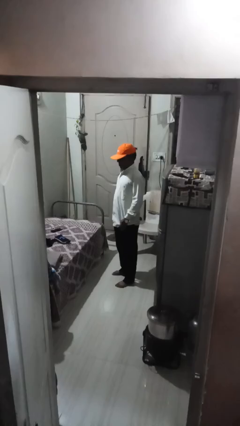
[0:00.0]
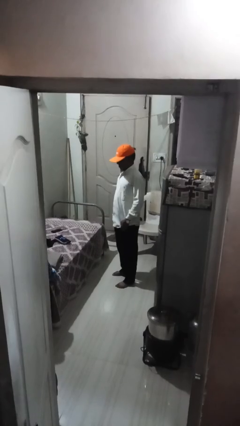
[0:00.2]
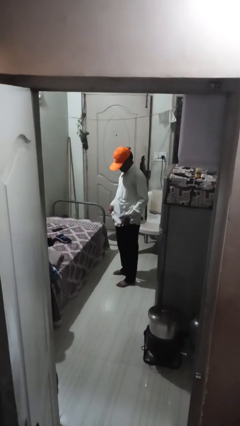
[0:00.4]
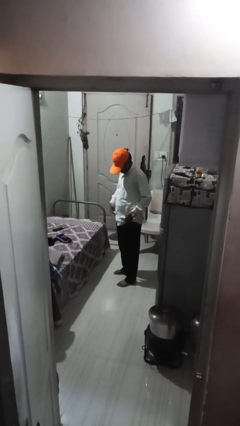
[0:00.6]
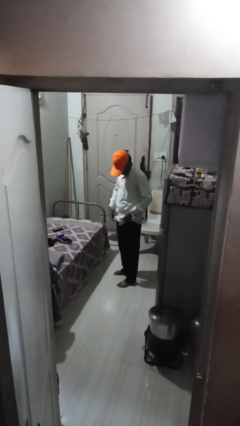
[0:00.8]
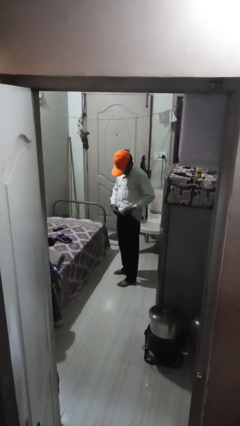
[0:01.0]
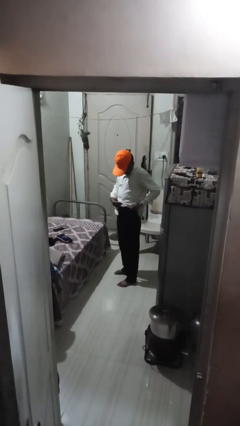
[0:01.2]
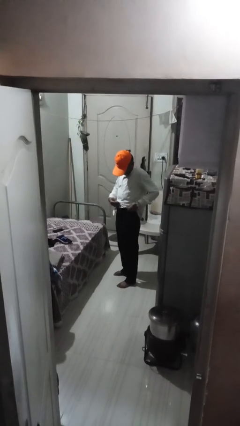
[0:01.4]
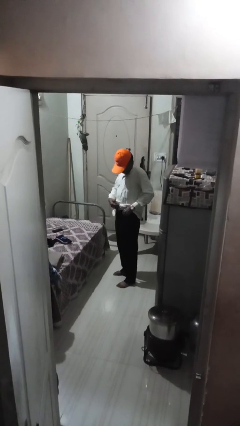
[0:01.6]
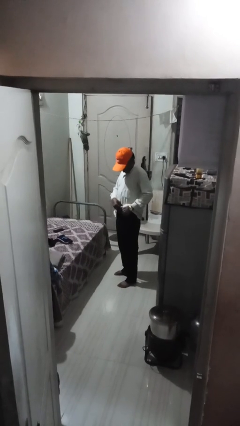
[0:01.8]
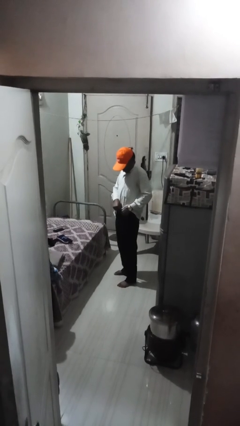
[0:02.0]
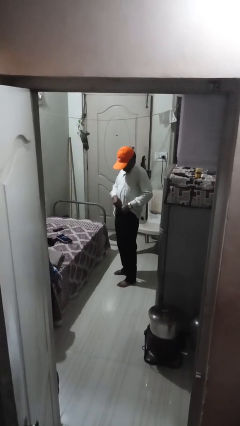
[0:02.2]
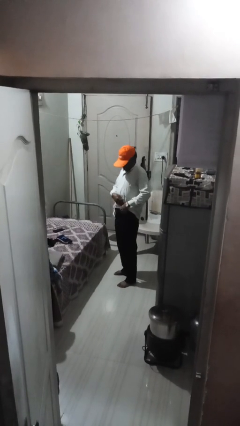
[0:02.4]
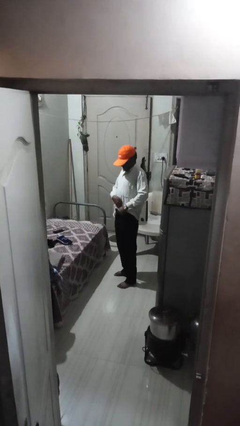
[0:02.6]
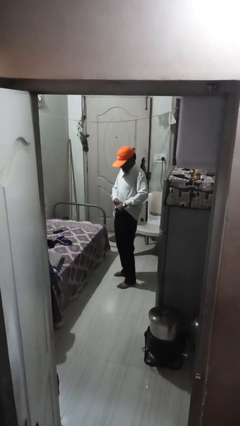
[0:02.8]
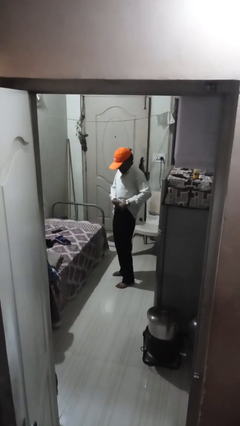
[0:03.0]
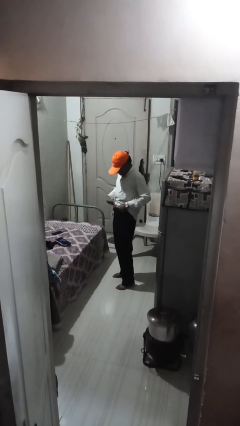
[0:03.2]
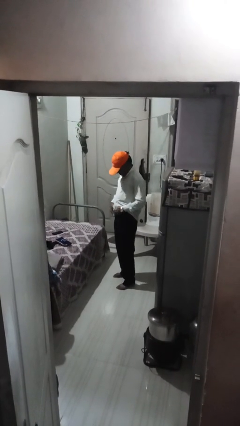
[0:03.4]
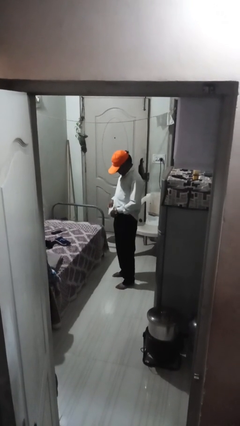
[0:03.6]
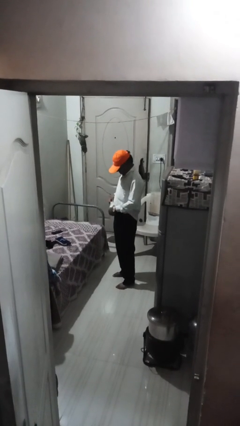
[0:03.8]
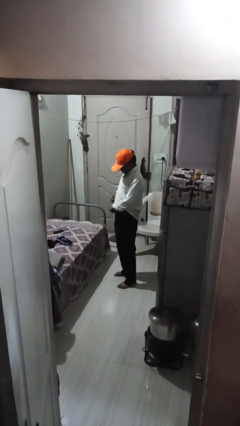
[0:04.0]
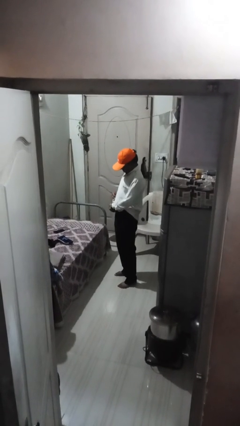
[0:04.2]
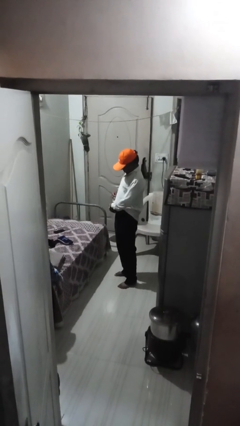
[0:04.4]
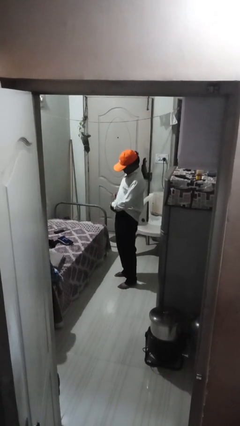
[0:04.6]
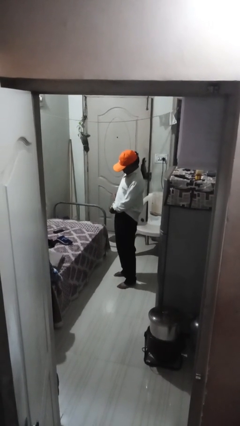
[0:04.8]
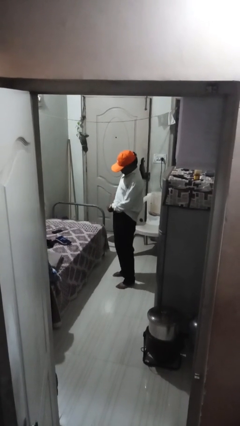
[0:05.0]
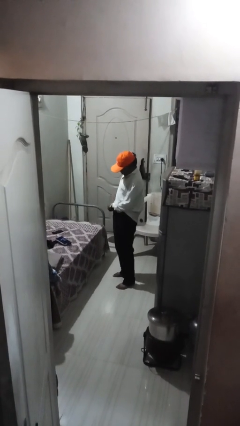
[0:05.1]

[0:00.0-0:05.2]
person tucks in shirt

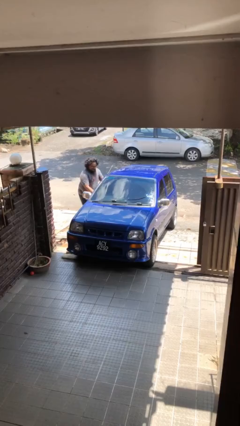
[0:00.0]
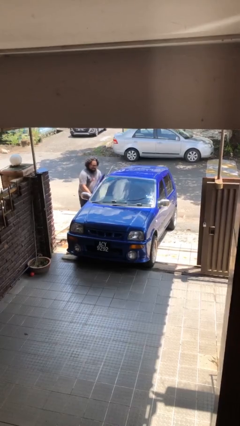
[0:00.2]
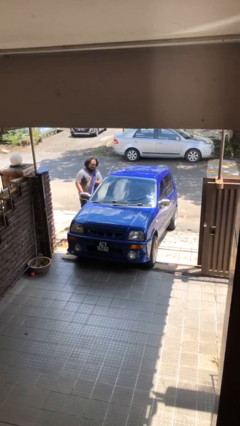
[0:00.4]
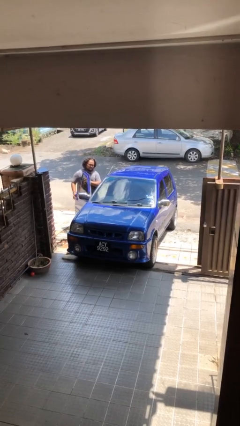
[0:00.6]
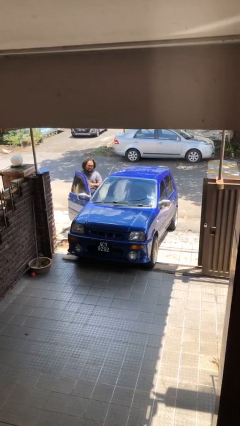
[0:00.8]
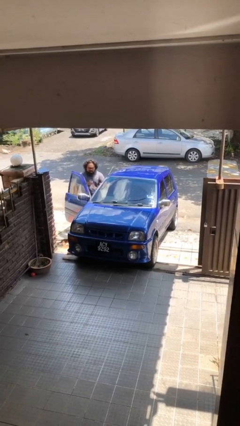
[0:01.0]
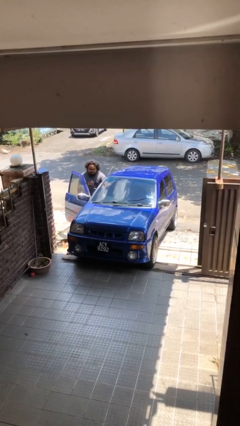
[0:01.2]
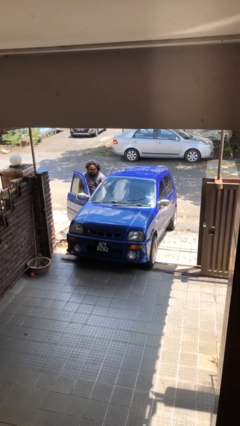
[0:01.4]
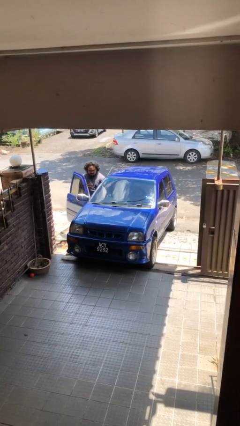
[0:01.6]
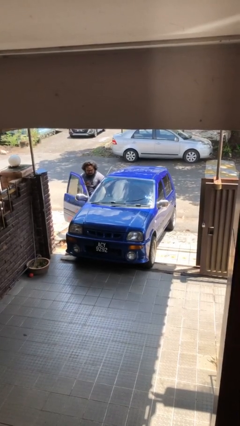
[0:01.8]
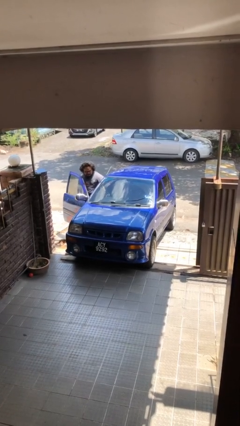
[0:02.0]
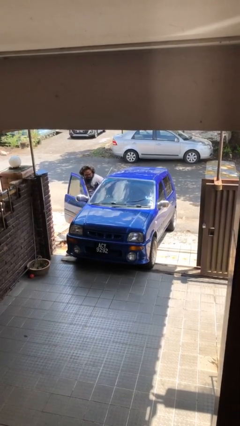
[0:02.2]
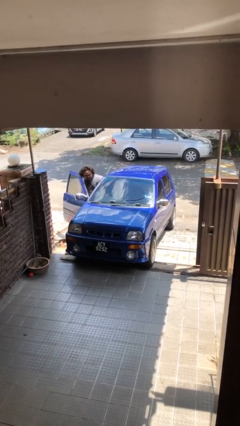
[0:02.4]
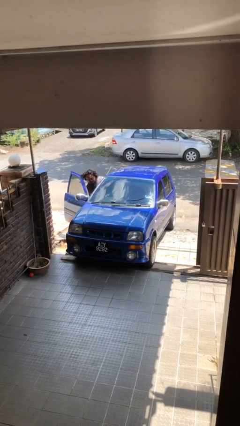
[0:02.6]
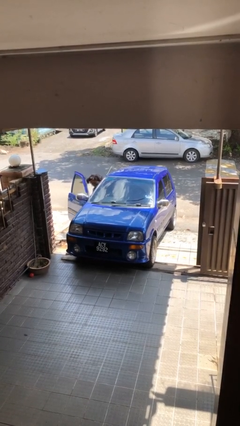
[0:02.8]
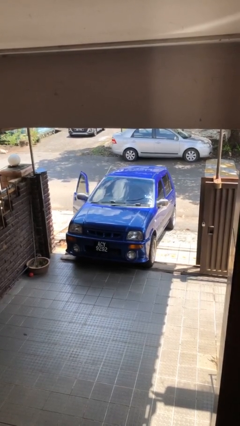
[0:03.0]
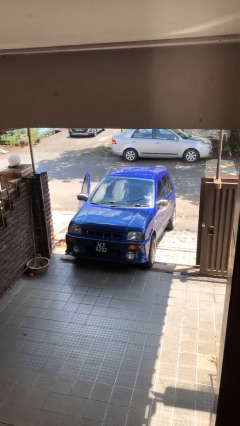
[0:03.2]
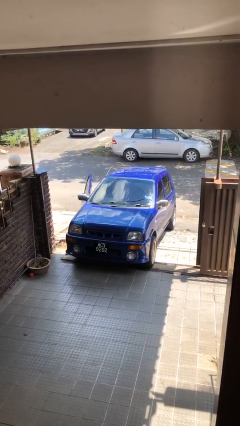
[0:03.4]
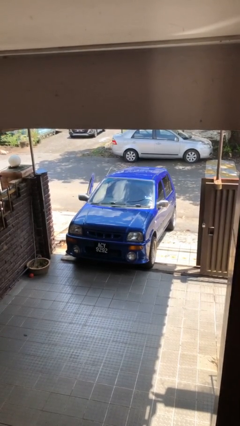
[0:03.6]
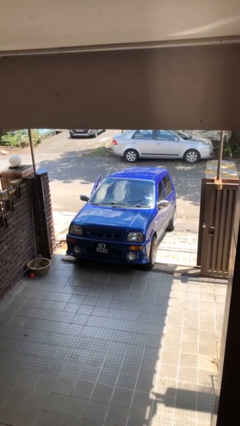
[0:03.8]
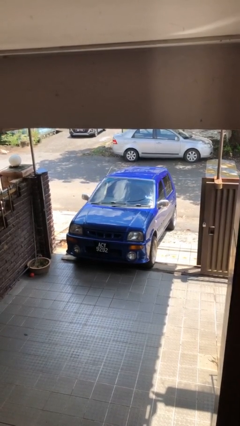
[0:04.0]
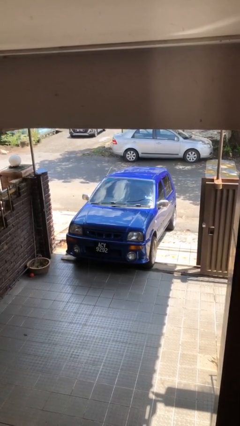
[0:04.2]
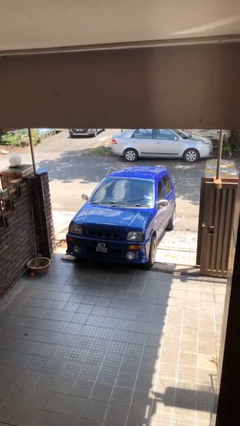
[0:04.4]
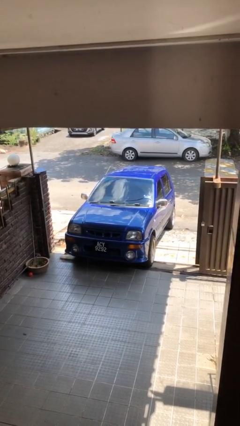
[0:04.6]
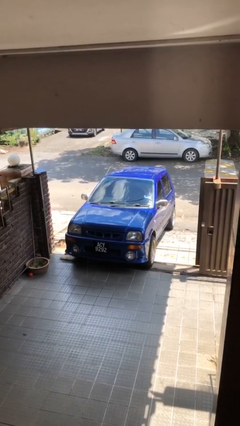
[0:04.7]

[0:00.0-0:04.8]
car picks up person

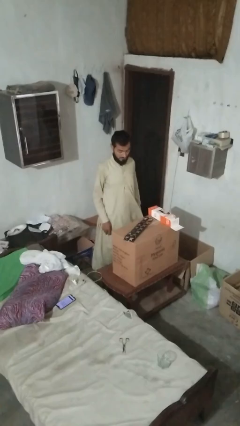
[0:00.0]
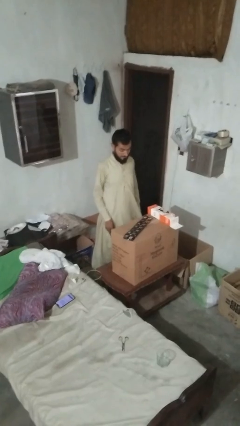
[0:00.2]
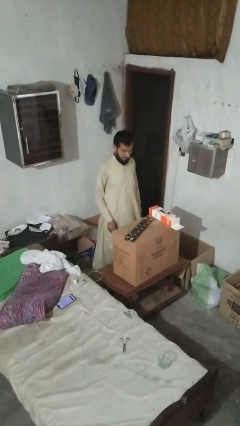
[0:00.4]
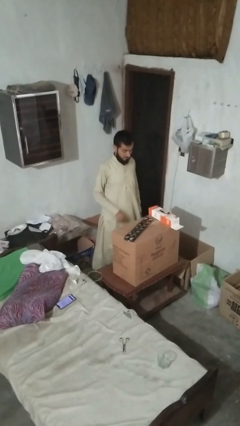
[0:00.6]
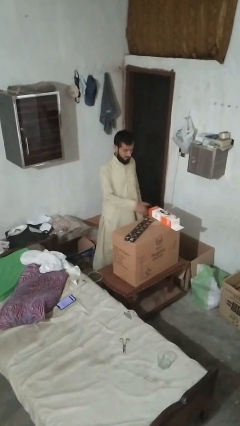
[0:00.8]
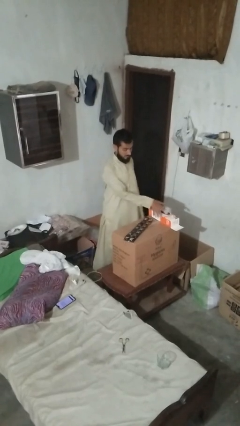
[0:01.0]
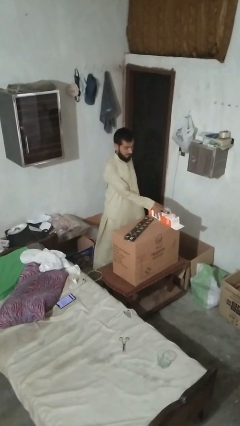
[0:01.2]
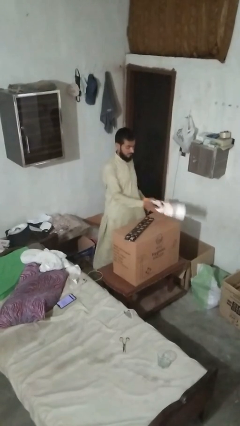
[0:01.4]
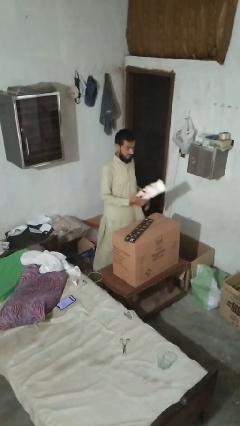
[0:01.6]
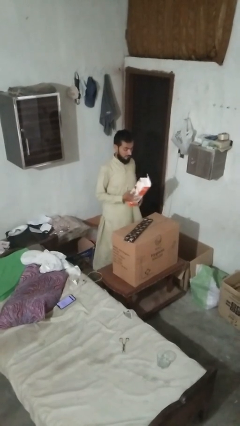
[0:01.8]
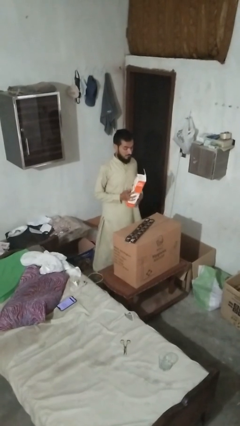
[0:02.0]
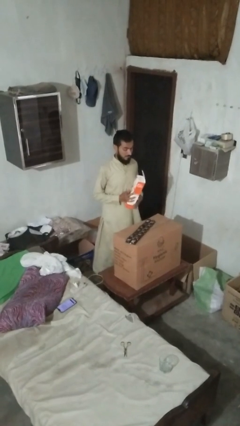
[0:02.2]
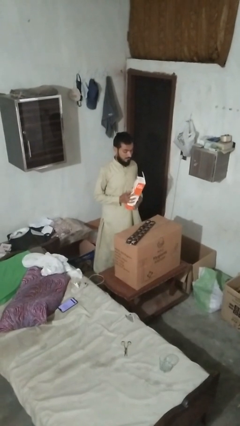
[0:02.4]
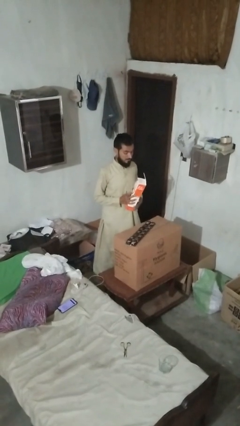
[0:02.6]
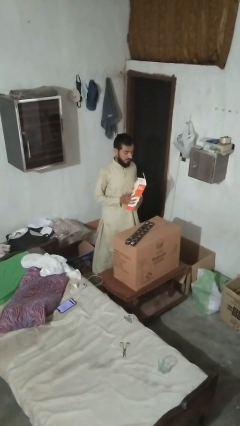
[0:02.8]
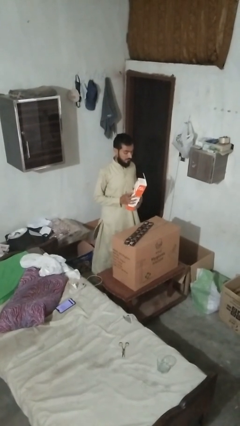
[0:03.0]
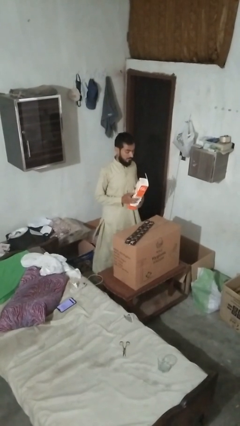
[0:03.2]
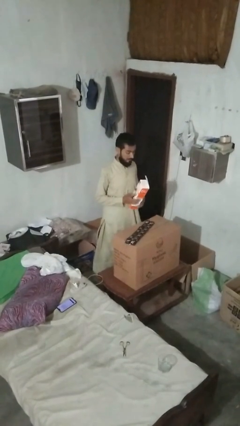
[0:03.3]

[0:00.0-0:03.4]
person picks up object from countertop

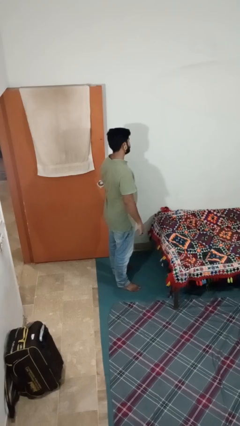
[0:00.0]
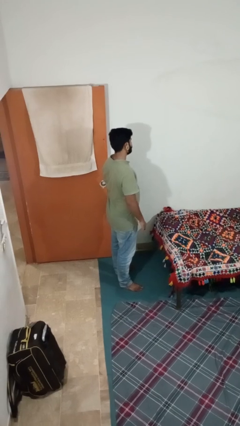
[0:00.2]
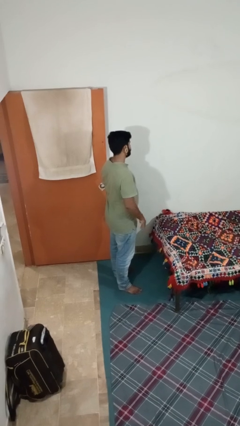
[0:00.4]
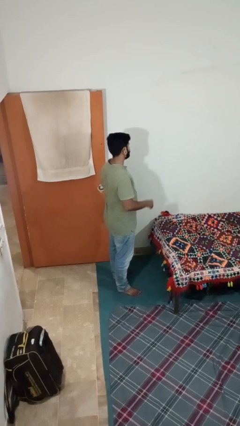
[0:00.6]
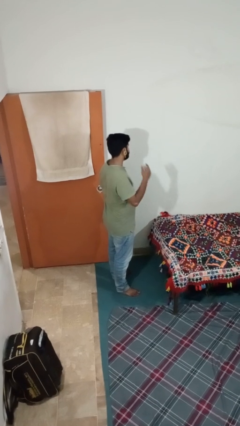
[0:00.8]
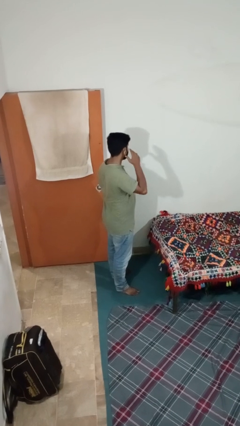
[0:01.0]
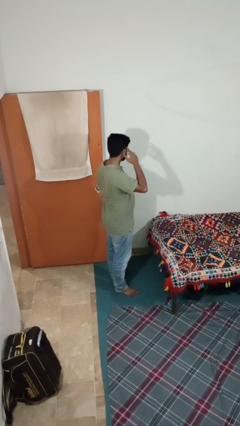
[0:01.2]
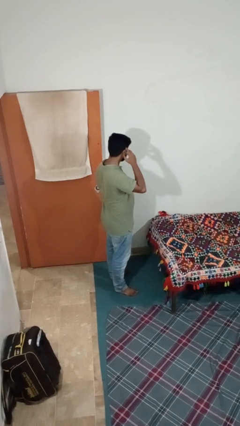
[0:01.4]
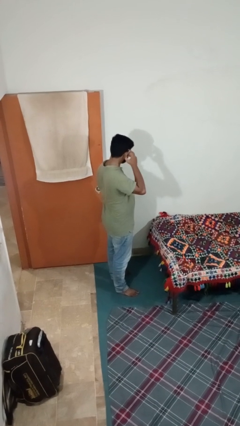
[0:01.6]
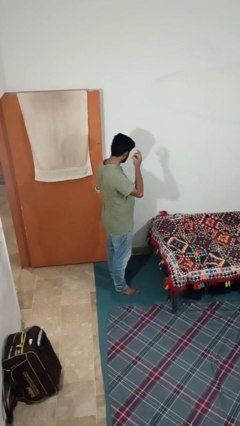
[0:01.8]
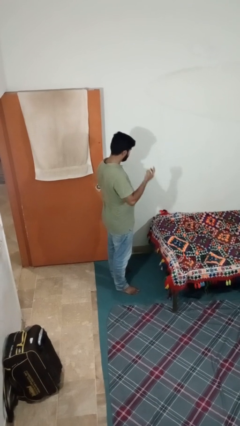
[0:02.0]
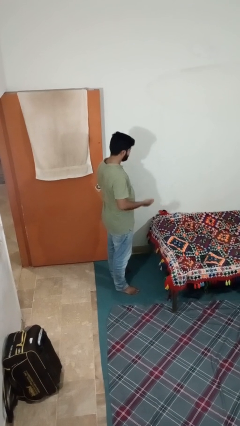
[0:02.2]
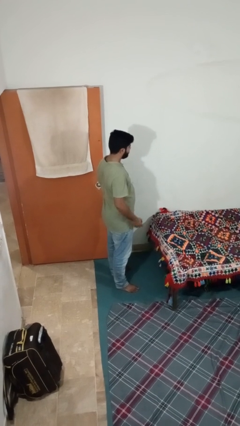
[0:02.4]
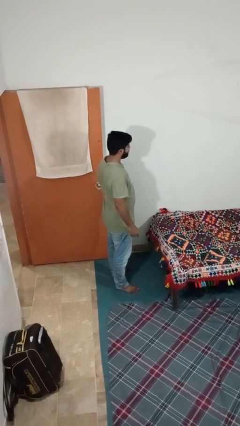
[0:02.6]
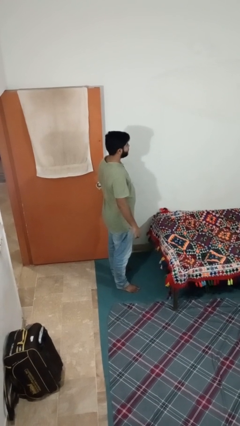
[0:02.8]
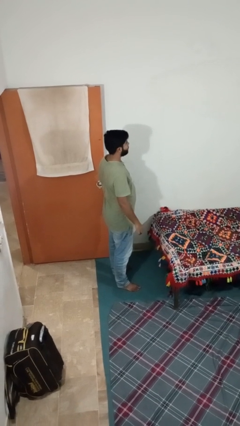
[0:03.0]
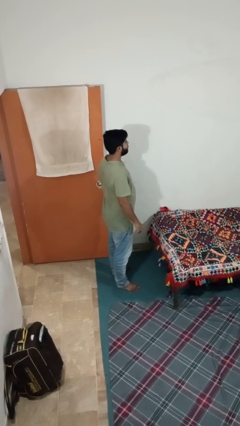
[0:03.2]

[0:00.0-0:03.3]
person takes off earrings

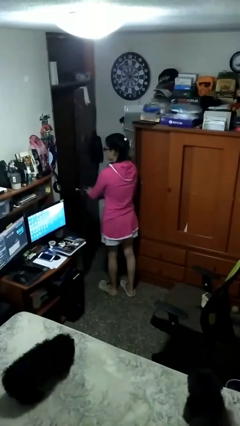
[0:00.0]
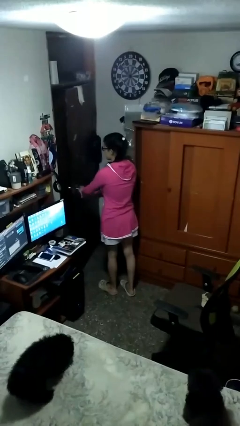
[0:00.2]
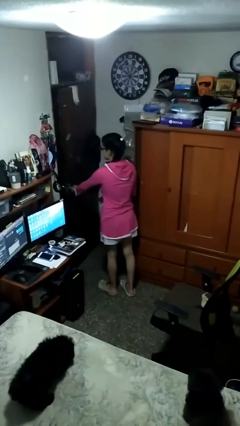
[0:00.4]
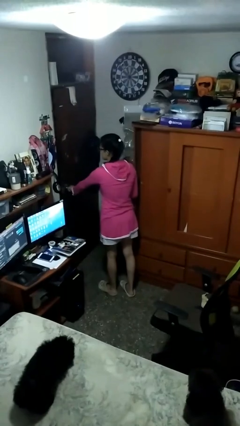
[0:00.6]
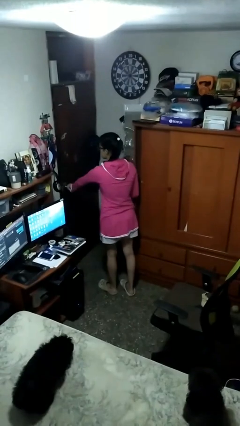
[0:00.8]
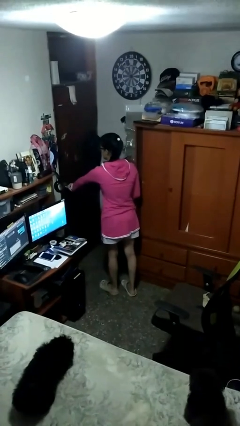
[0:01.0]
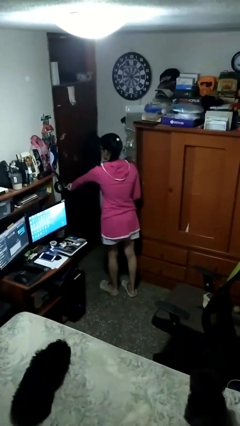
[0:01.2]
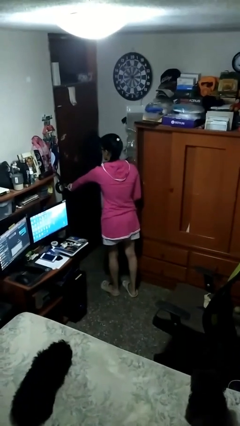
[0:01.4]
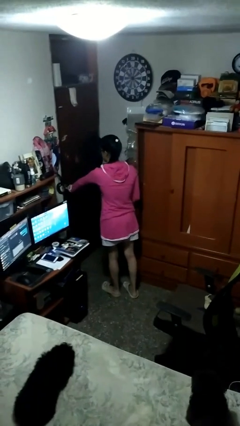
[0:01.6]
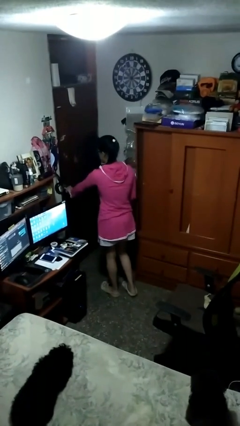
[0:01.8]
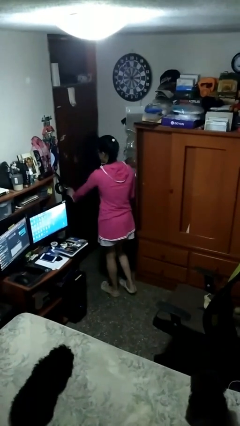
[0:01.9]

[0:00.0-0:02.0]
person closes facility door
